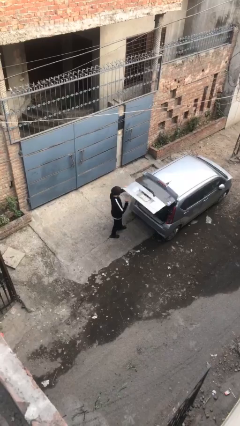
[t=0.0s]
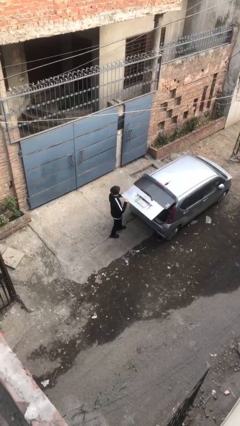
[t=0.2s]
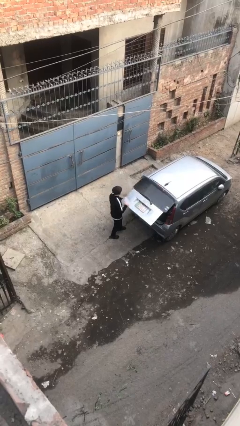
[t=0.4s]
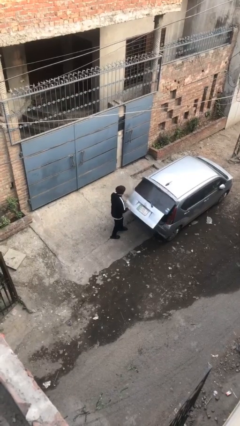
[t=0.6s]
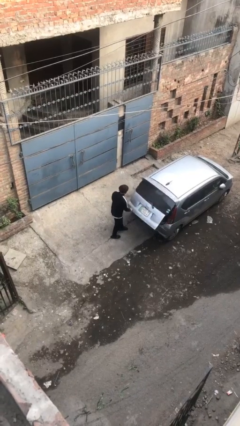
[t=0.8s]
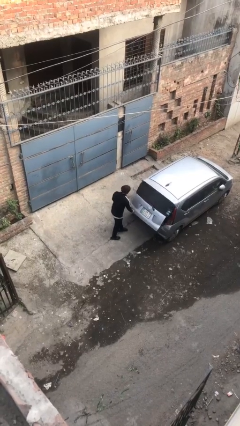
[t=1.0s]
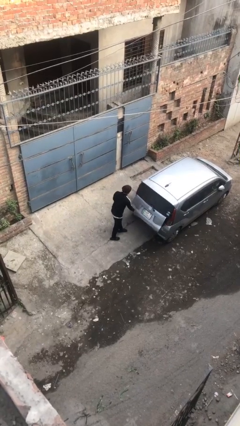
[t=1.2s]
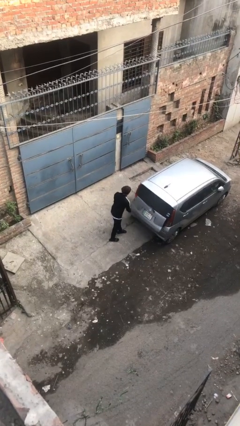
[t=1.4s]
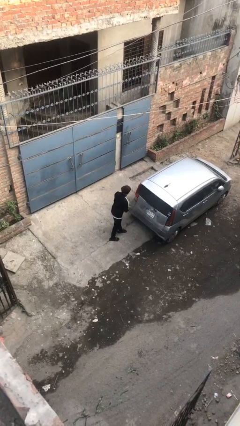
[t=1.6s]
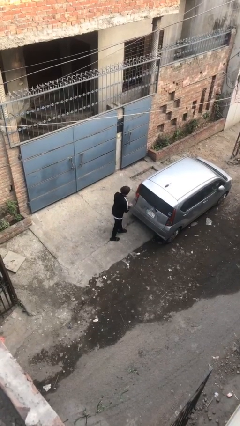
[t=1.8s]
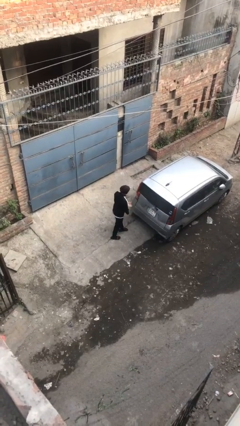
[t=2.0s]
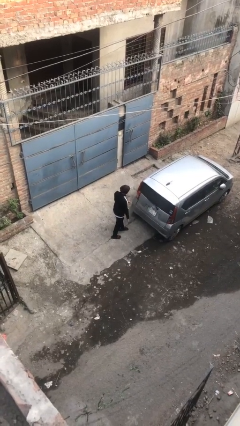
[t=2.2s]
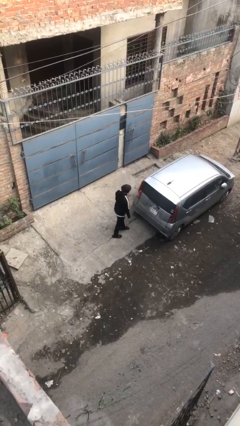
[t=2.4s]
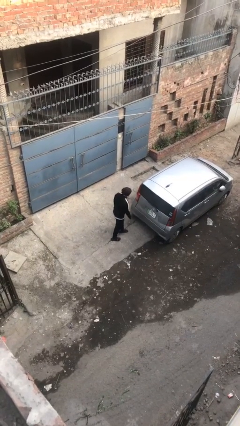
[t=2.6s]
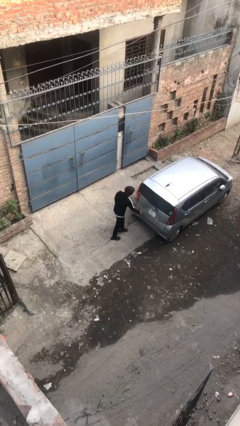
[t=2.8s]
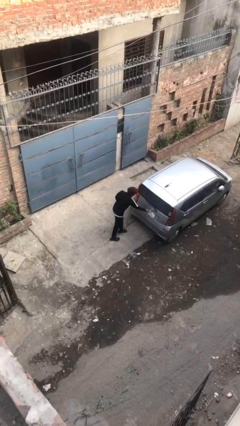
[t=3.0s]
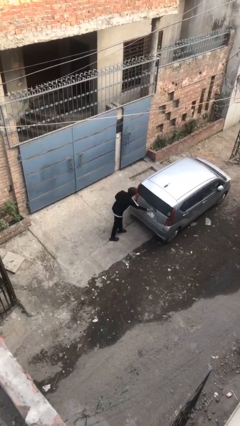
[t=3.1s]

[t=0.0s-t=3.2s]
person closes car trunk

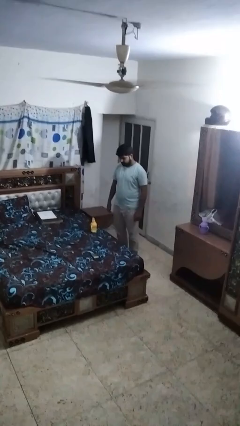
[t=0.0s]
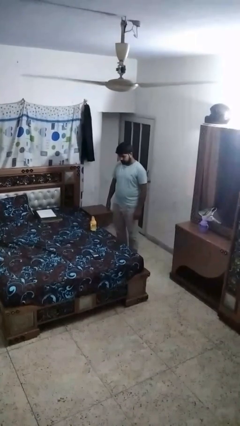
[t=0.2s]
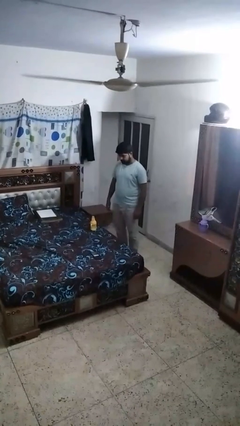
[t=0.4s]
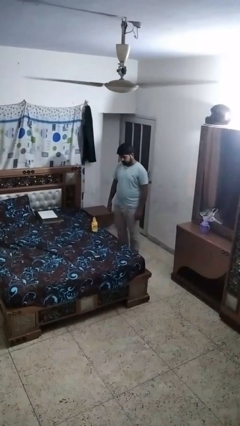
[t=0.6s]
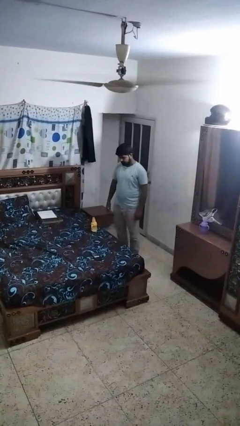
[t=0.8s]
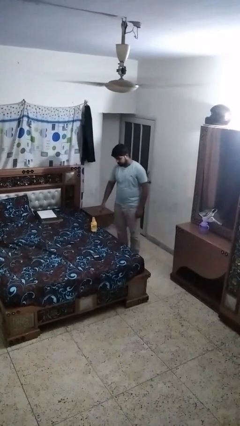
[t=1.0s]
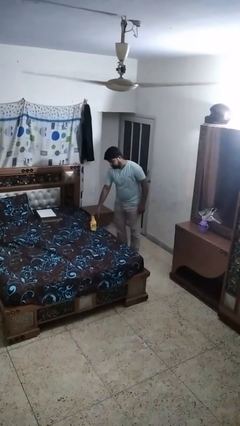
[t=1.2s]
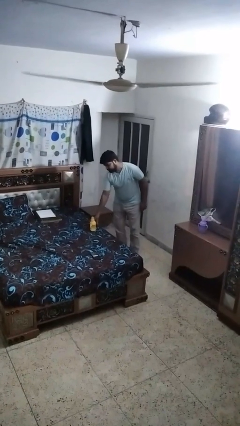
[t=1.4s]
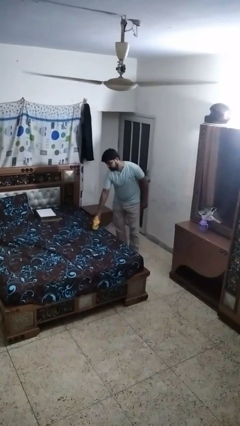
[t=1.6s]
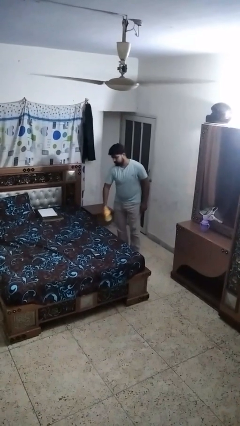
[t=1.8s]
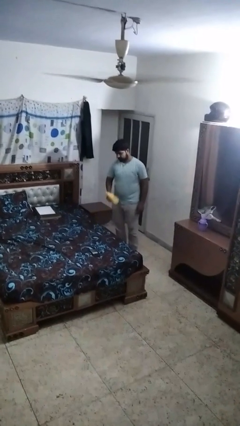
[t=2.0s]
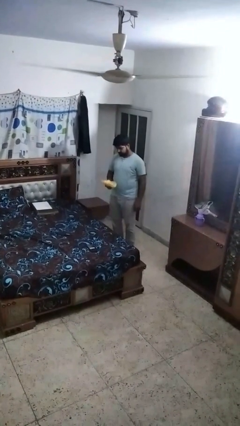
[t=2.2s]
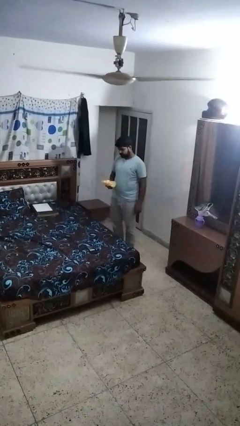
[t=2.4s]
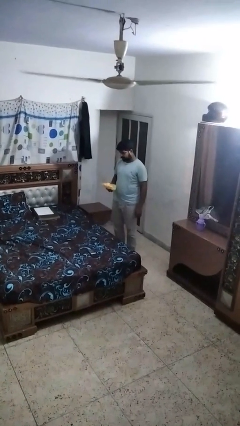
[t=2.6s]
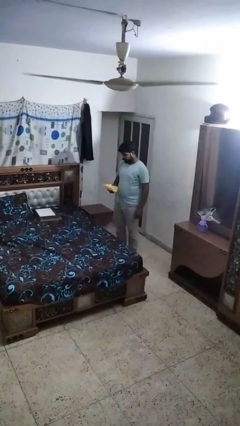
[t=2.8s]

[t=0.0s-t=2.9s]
person picks up object from bed

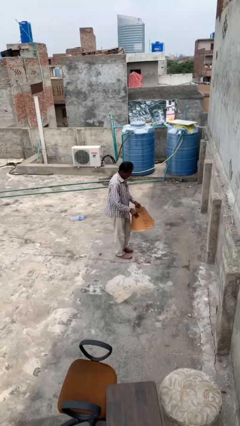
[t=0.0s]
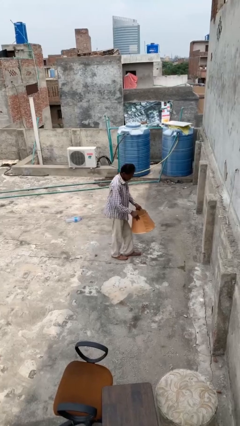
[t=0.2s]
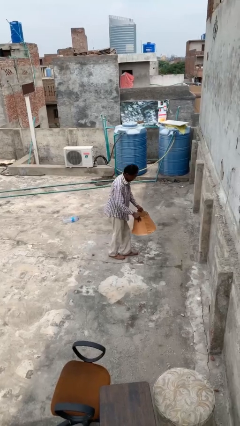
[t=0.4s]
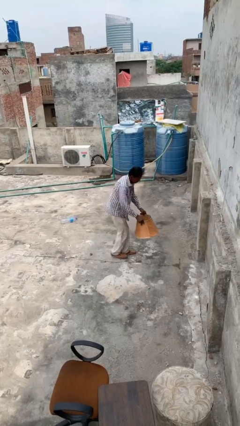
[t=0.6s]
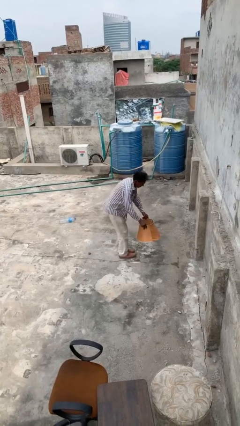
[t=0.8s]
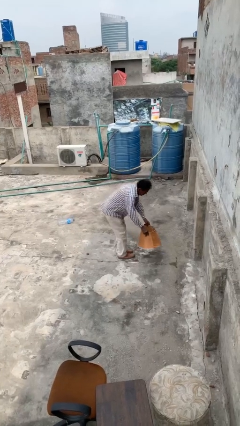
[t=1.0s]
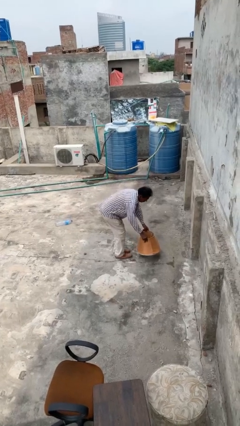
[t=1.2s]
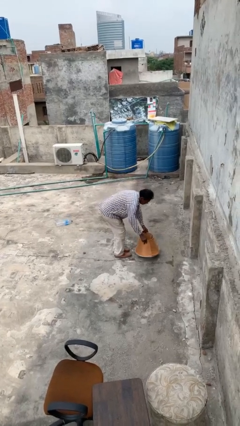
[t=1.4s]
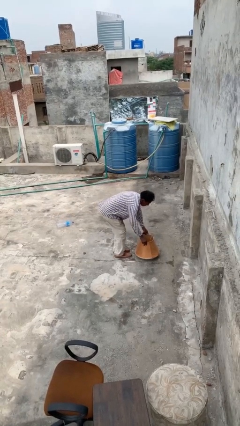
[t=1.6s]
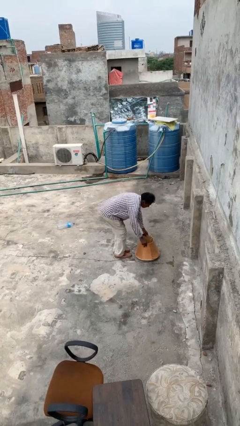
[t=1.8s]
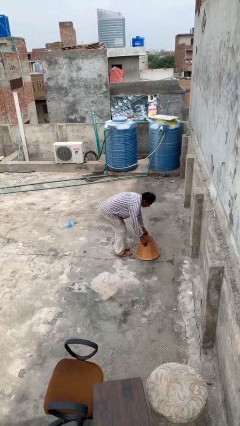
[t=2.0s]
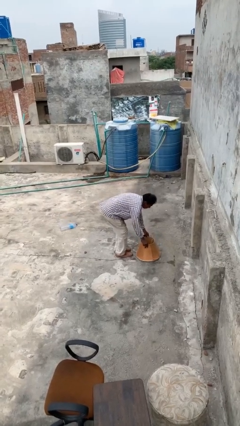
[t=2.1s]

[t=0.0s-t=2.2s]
person puts down object on floor

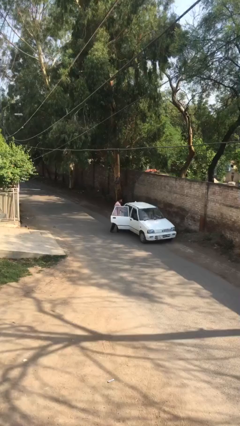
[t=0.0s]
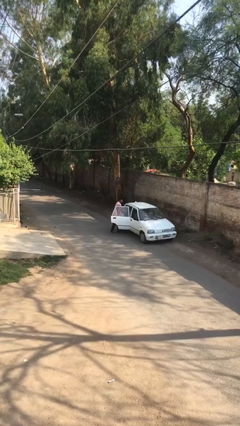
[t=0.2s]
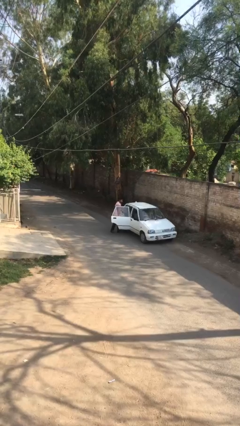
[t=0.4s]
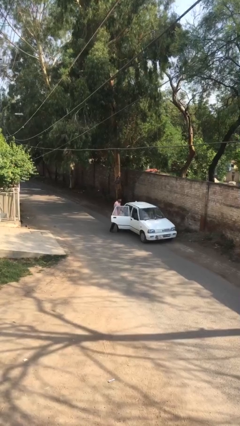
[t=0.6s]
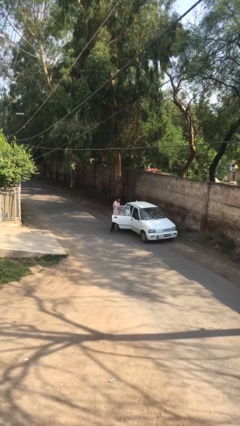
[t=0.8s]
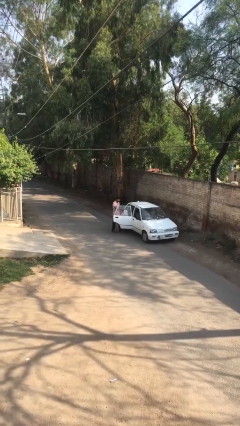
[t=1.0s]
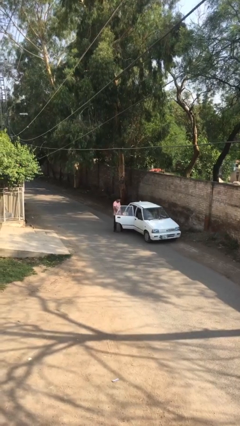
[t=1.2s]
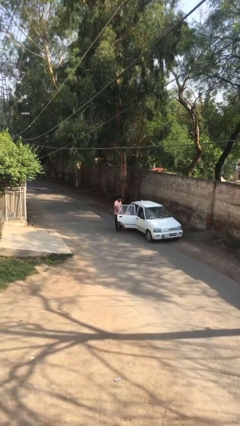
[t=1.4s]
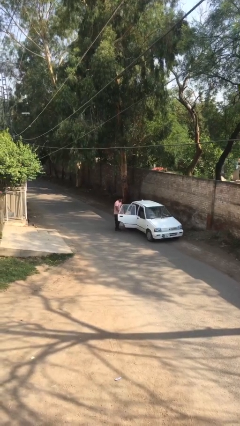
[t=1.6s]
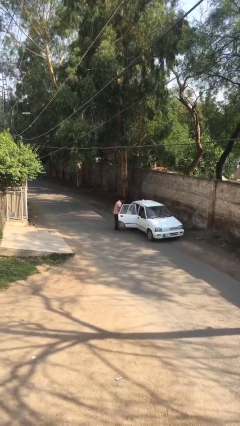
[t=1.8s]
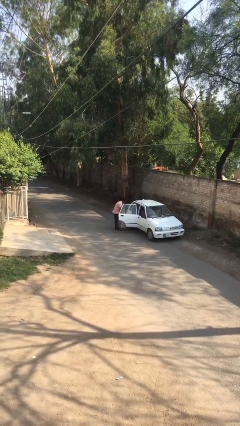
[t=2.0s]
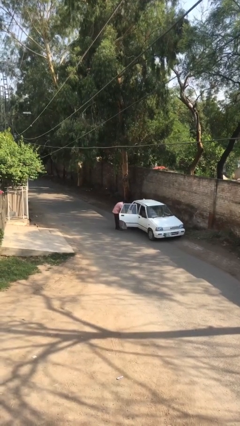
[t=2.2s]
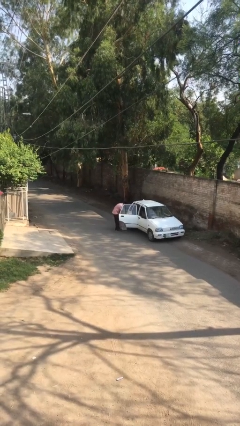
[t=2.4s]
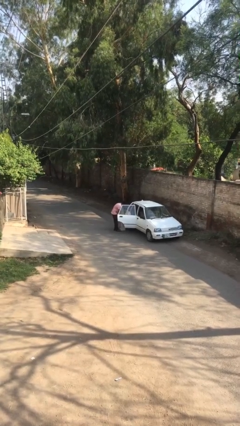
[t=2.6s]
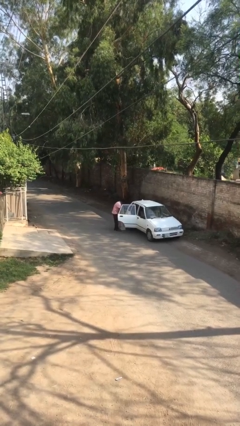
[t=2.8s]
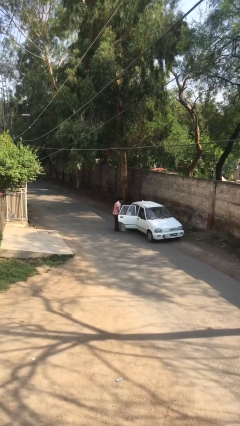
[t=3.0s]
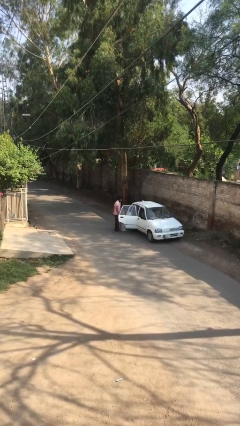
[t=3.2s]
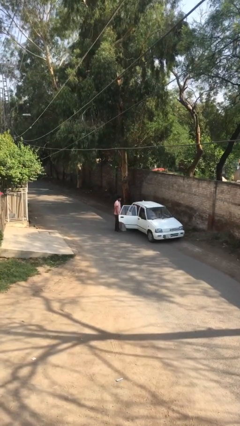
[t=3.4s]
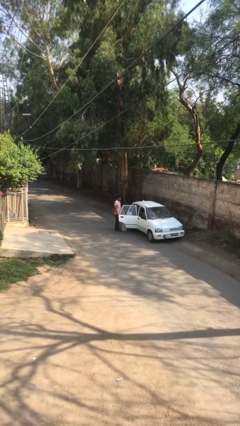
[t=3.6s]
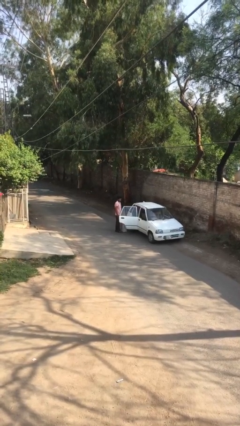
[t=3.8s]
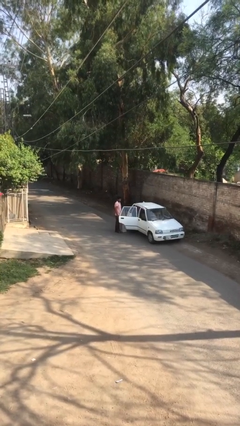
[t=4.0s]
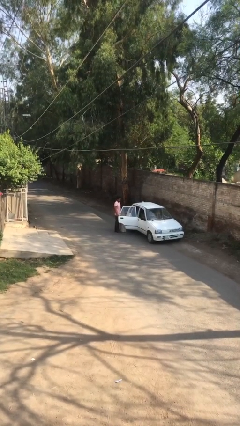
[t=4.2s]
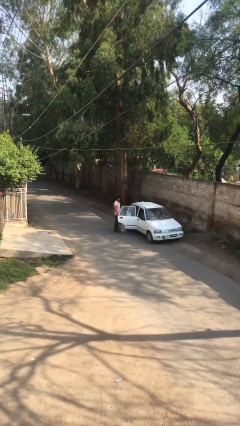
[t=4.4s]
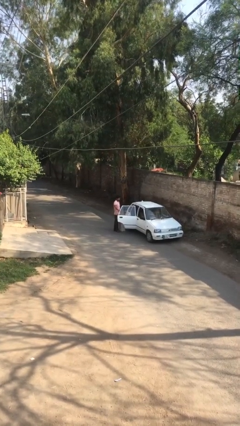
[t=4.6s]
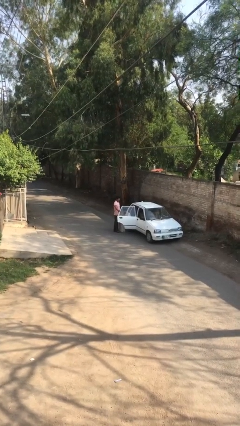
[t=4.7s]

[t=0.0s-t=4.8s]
person unloads car

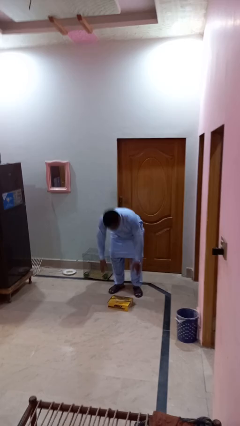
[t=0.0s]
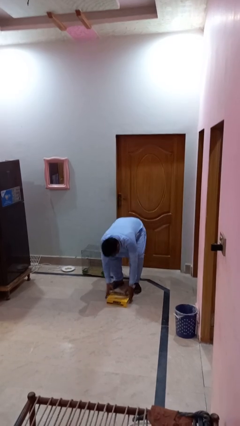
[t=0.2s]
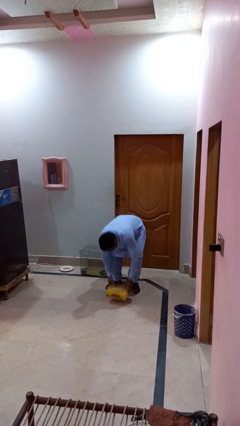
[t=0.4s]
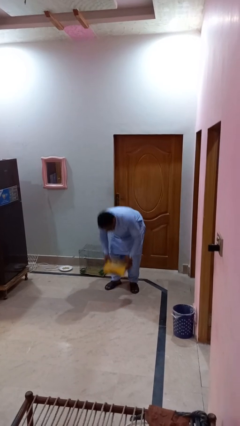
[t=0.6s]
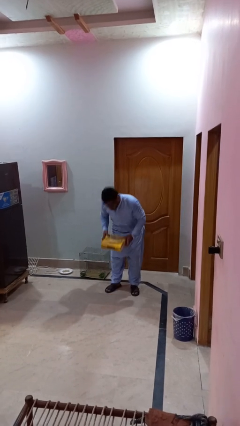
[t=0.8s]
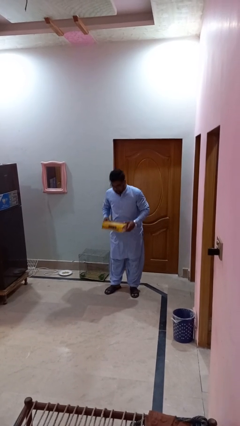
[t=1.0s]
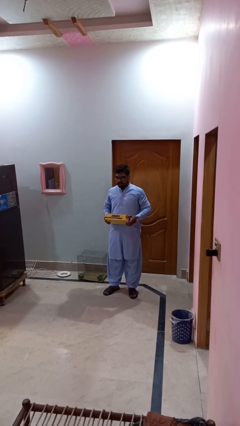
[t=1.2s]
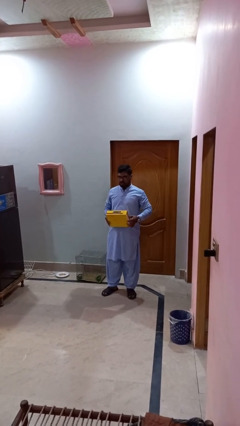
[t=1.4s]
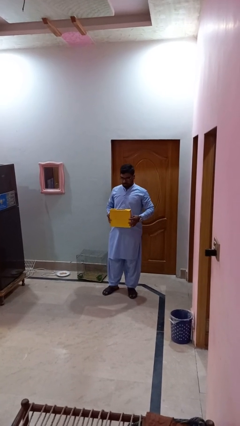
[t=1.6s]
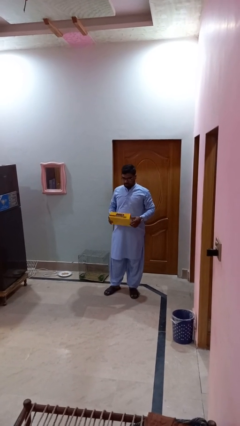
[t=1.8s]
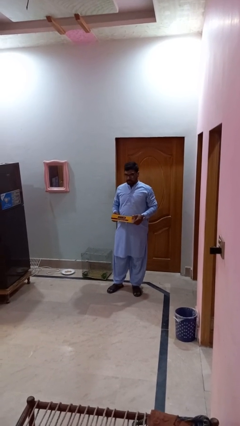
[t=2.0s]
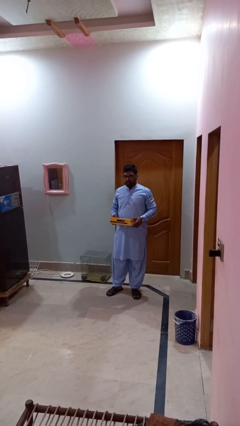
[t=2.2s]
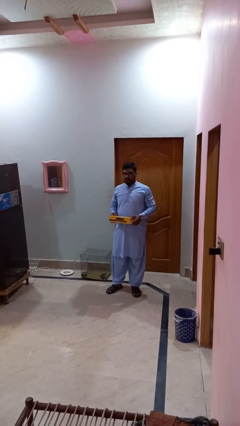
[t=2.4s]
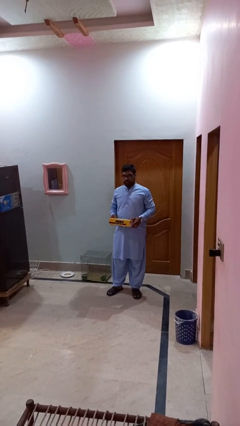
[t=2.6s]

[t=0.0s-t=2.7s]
person picks up object from floor

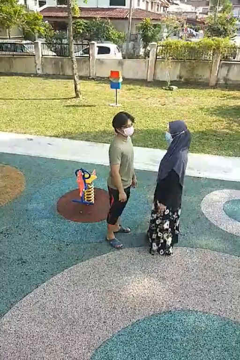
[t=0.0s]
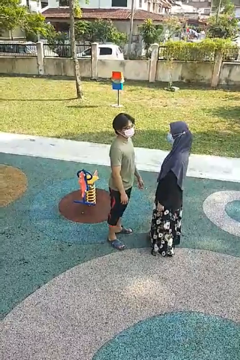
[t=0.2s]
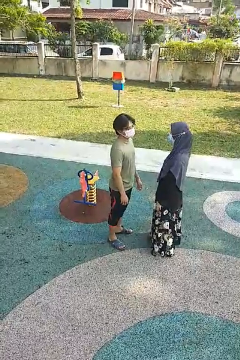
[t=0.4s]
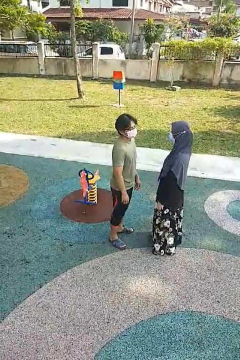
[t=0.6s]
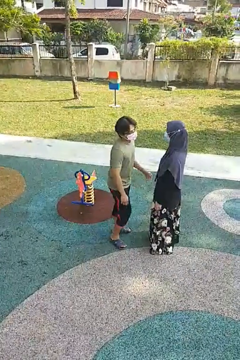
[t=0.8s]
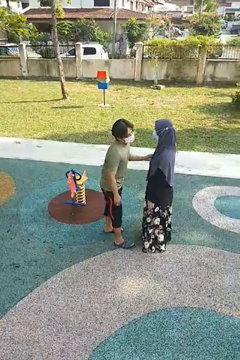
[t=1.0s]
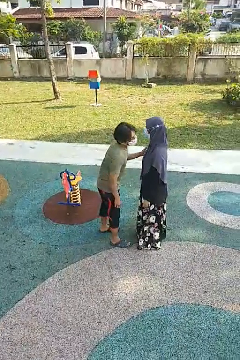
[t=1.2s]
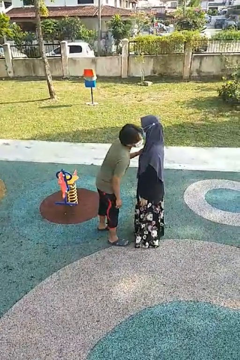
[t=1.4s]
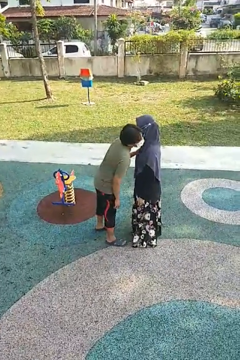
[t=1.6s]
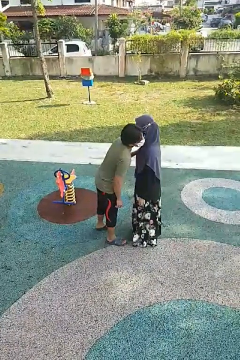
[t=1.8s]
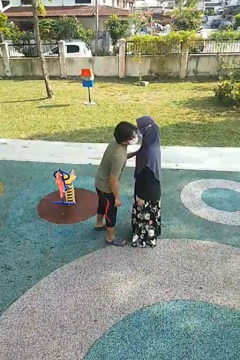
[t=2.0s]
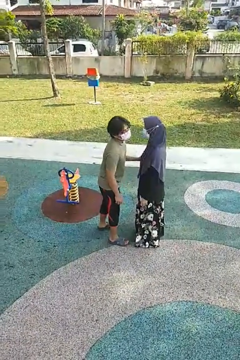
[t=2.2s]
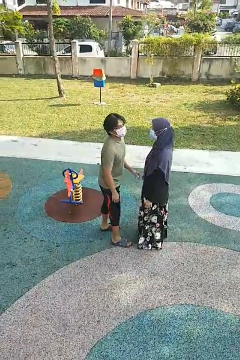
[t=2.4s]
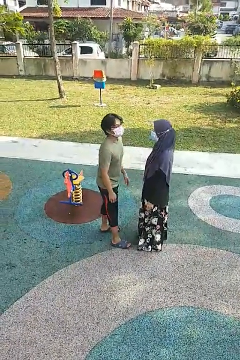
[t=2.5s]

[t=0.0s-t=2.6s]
person kisses cheek of person
